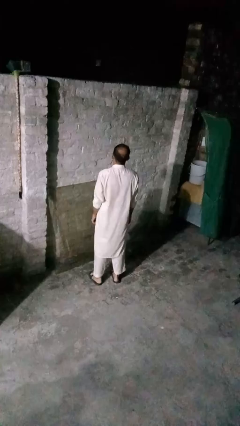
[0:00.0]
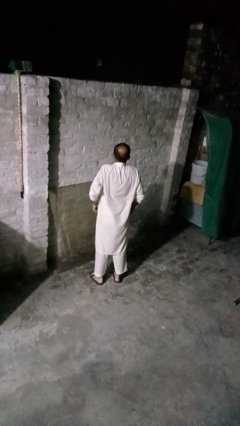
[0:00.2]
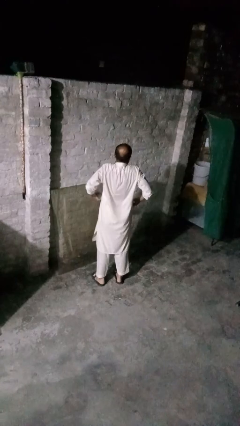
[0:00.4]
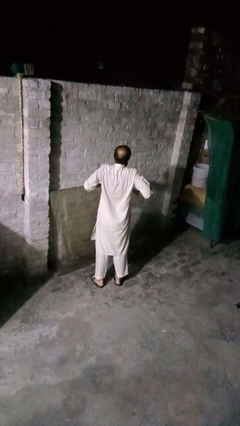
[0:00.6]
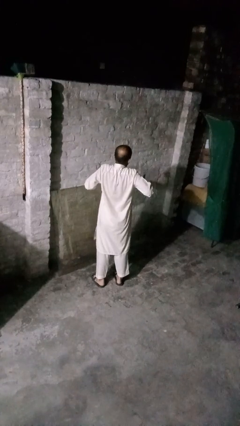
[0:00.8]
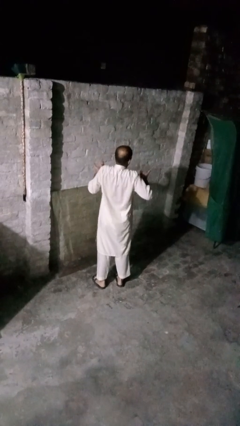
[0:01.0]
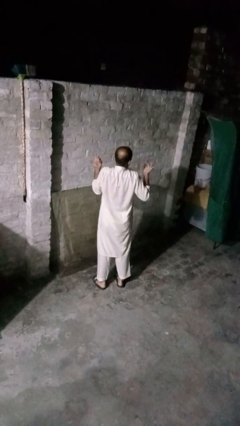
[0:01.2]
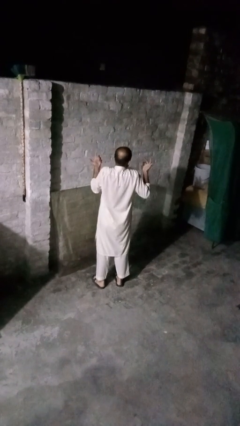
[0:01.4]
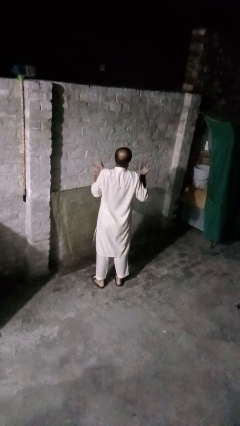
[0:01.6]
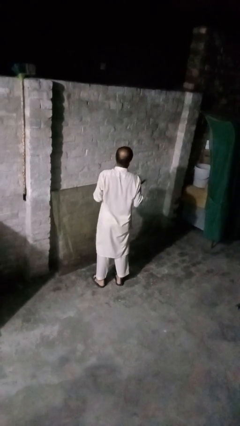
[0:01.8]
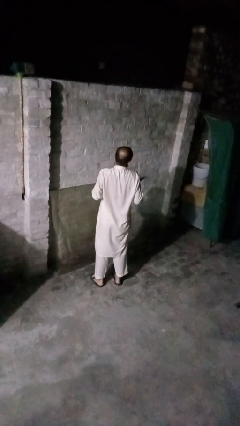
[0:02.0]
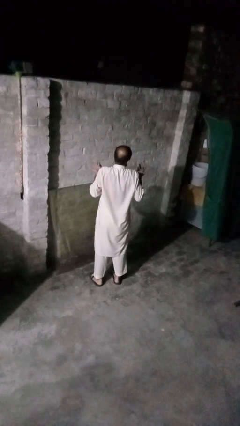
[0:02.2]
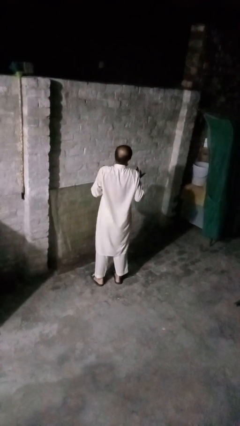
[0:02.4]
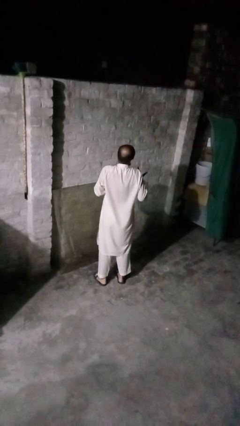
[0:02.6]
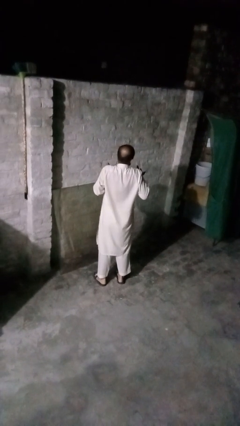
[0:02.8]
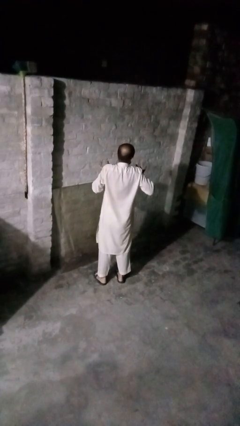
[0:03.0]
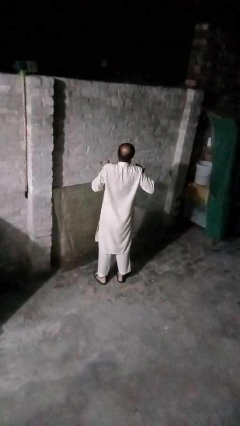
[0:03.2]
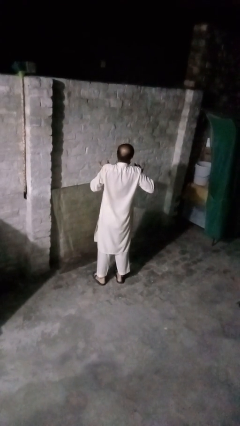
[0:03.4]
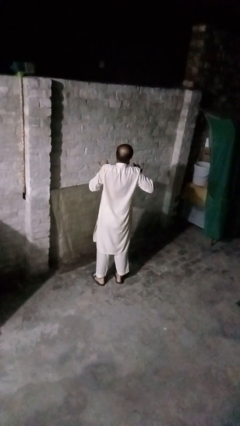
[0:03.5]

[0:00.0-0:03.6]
person shrugs

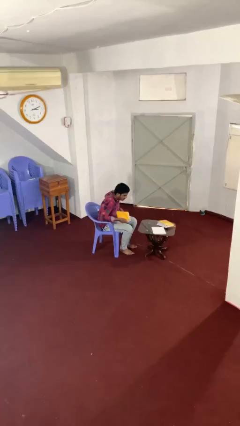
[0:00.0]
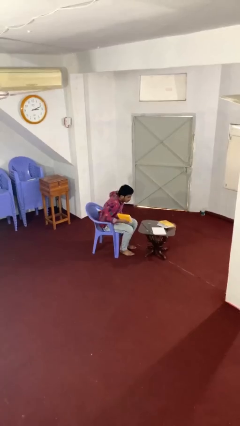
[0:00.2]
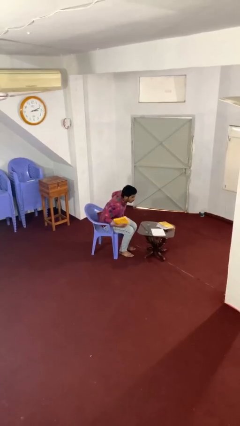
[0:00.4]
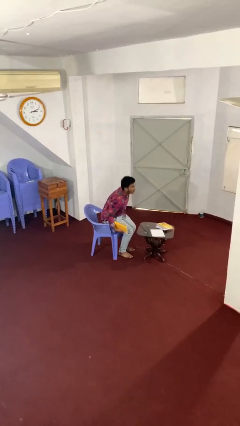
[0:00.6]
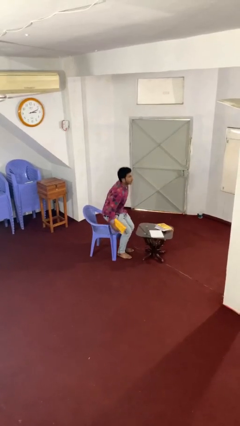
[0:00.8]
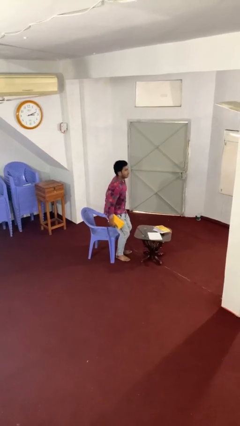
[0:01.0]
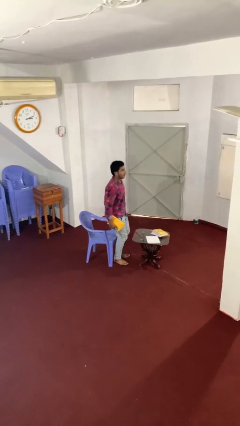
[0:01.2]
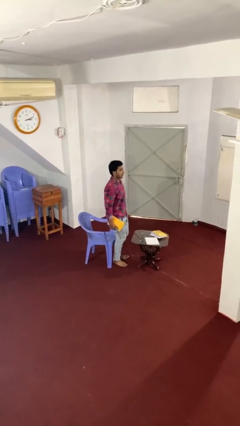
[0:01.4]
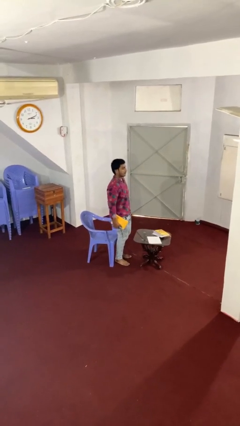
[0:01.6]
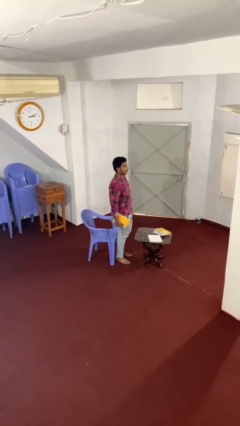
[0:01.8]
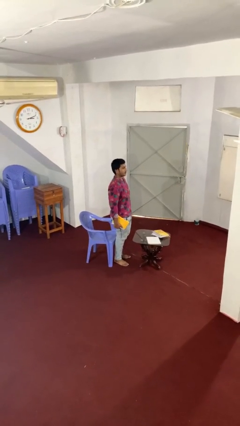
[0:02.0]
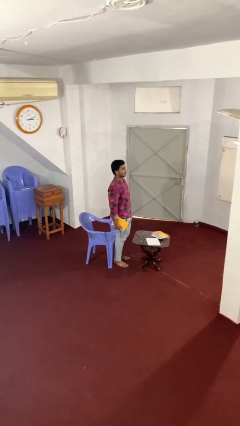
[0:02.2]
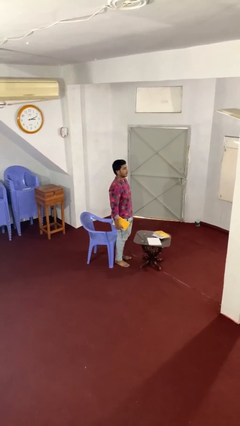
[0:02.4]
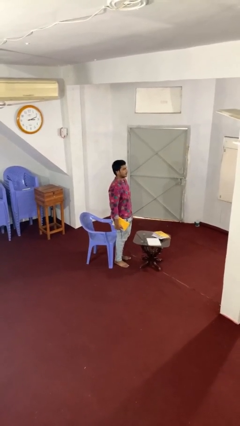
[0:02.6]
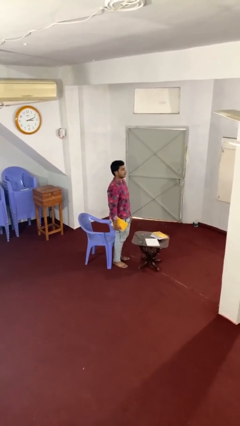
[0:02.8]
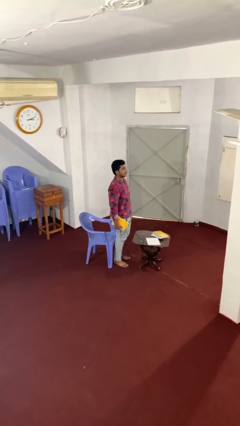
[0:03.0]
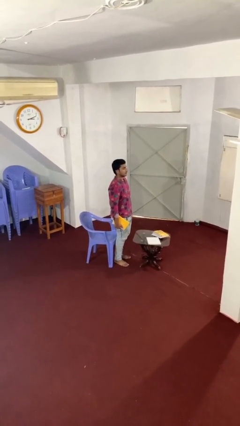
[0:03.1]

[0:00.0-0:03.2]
person stands up

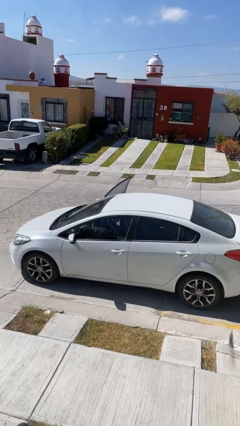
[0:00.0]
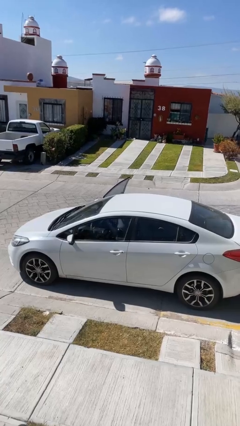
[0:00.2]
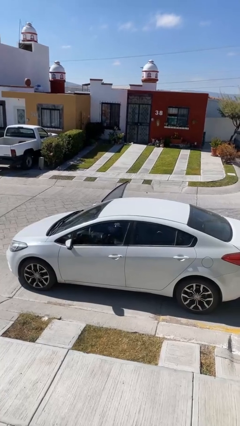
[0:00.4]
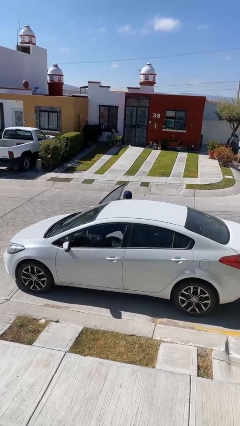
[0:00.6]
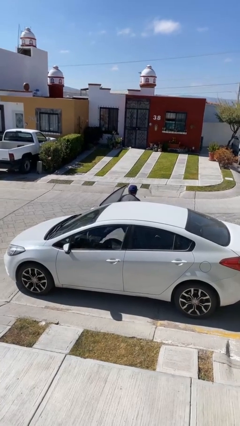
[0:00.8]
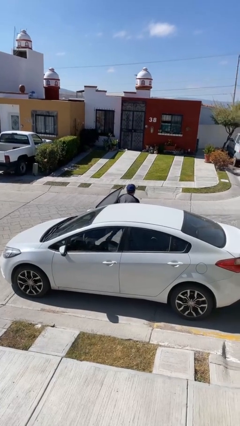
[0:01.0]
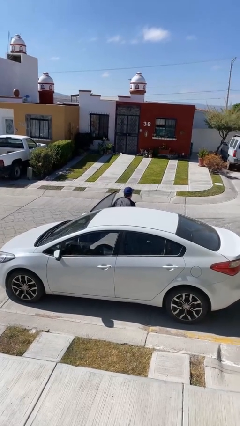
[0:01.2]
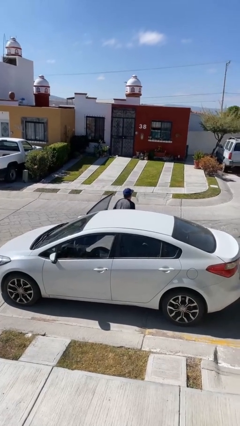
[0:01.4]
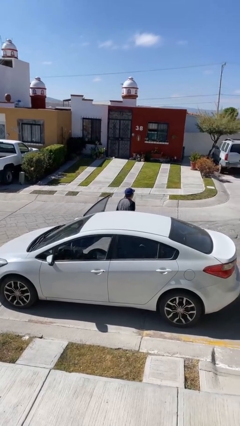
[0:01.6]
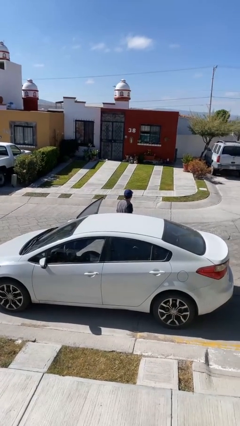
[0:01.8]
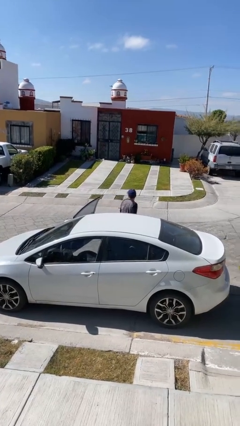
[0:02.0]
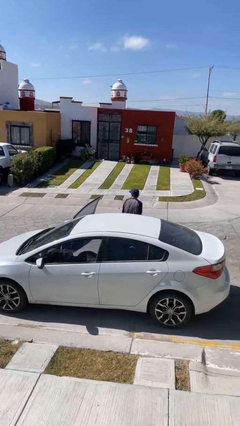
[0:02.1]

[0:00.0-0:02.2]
person exits car

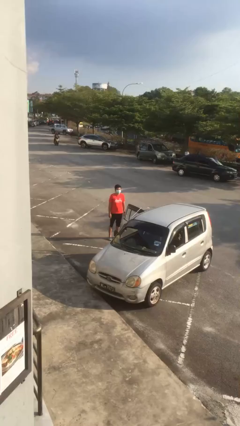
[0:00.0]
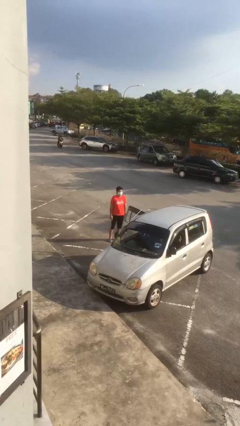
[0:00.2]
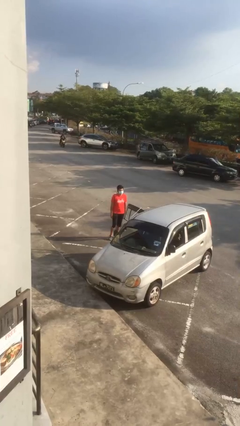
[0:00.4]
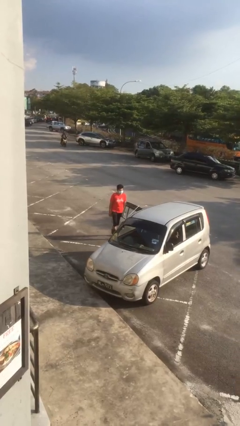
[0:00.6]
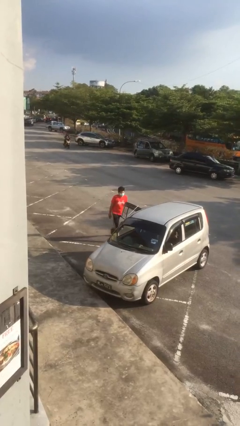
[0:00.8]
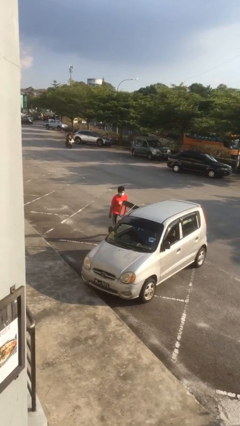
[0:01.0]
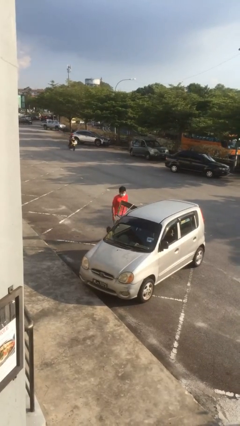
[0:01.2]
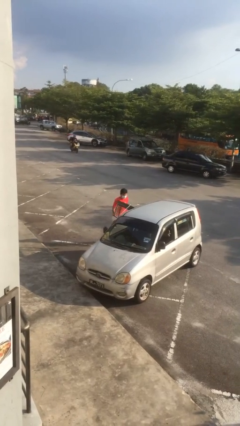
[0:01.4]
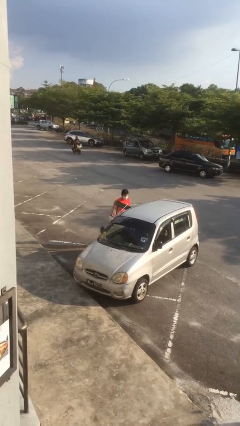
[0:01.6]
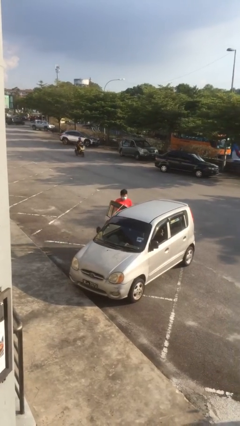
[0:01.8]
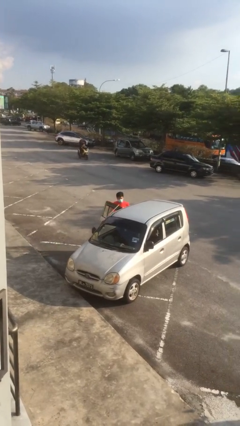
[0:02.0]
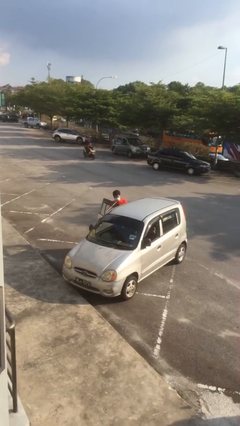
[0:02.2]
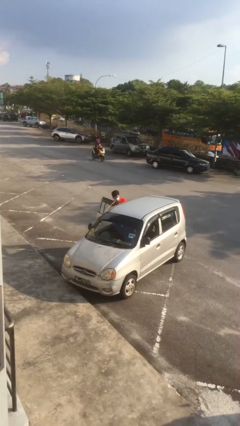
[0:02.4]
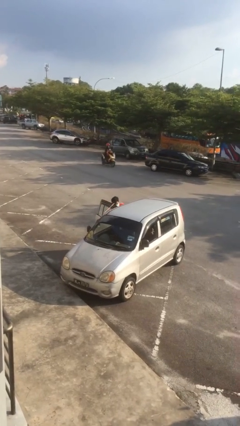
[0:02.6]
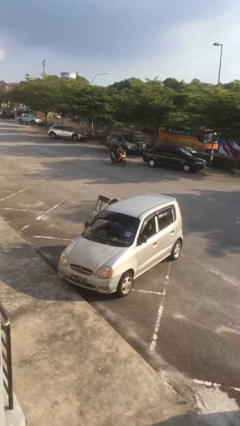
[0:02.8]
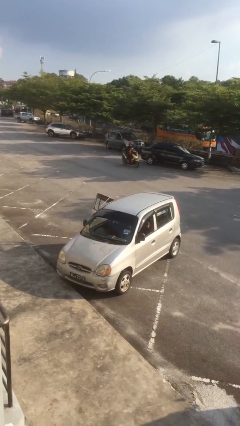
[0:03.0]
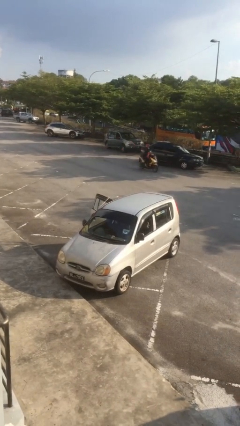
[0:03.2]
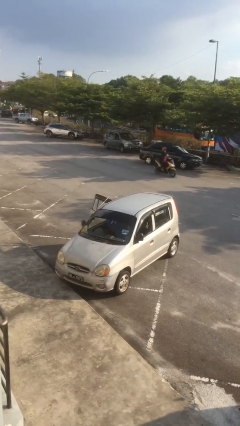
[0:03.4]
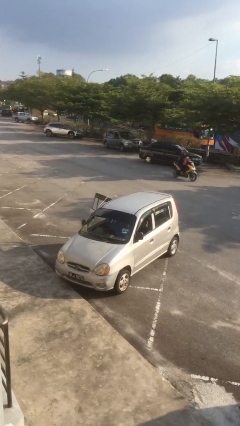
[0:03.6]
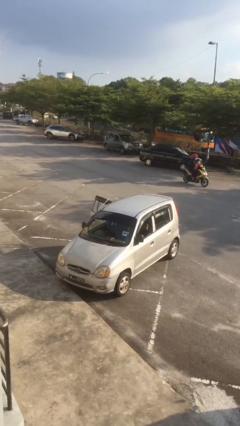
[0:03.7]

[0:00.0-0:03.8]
person enters car

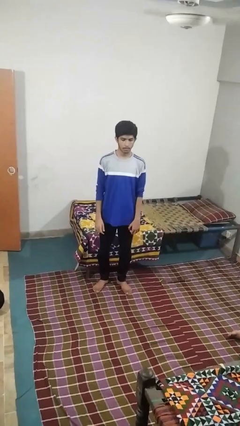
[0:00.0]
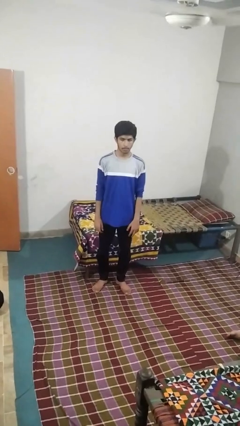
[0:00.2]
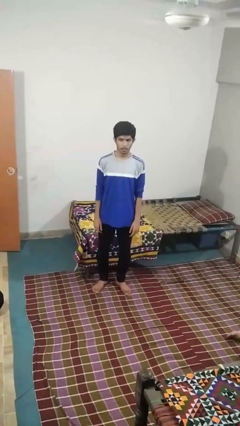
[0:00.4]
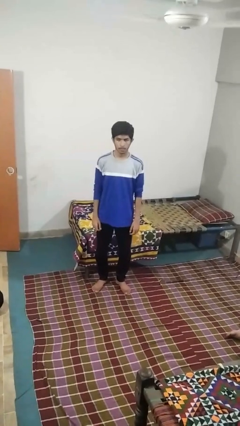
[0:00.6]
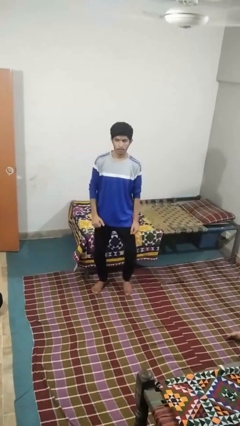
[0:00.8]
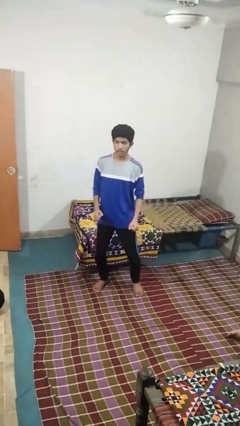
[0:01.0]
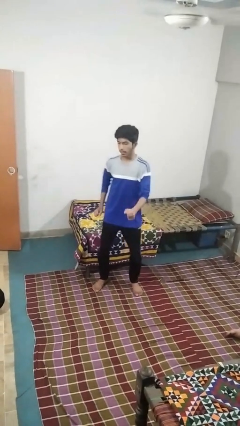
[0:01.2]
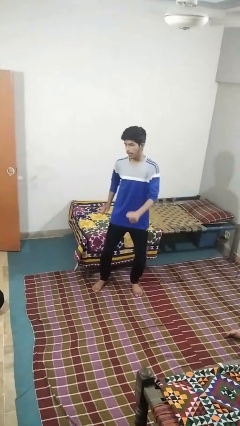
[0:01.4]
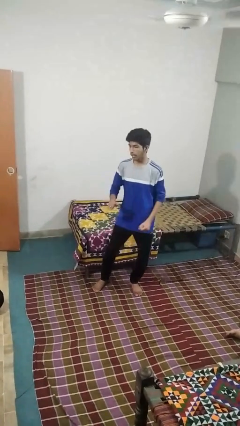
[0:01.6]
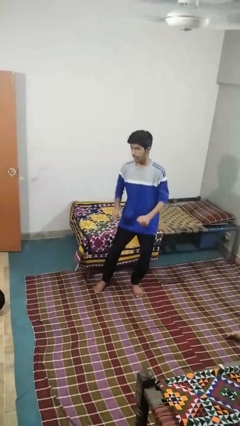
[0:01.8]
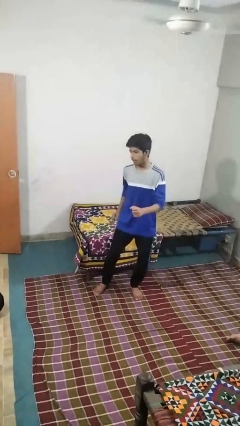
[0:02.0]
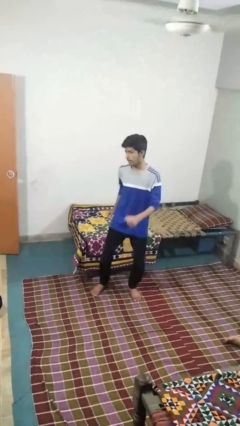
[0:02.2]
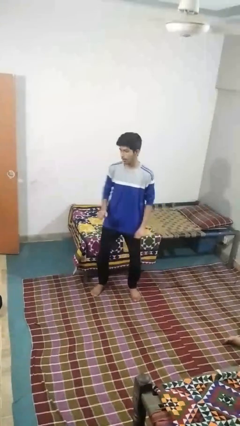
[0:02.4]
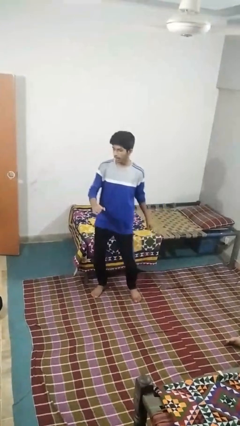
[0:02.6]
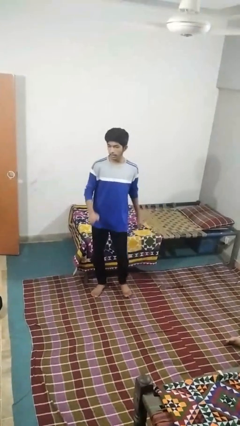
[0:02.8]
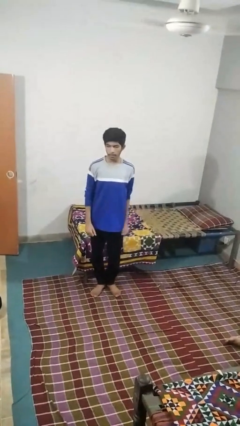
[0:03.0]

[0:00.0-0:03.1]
person dances in place

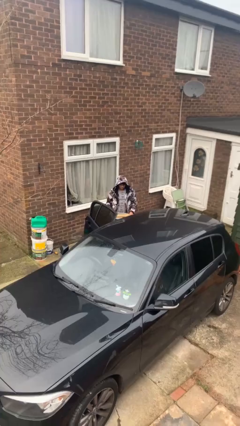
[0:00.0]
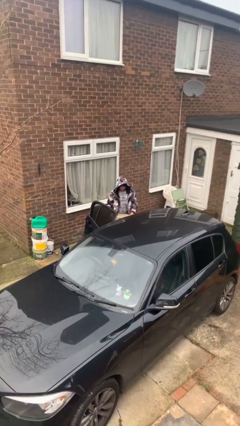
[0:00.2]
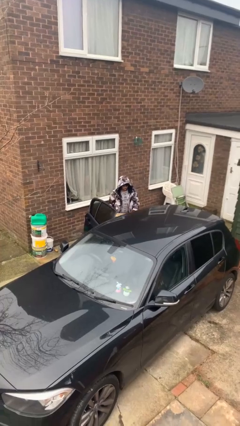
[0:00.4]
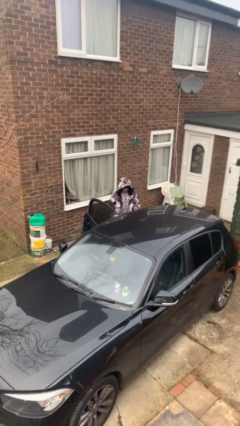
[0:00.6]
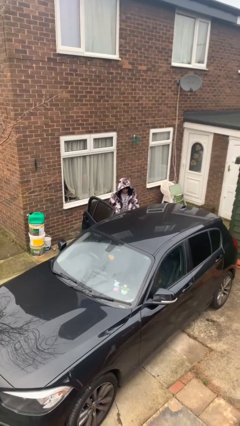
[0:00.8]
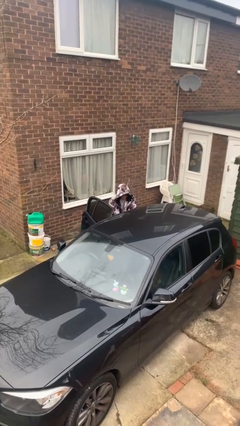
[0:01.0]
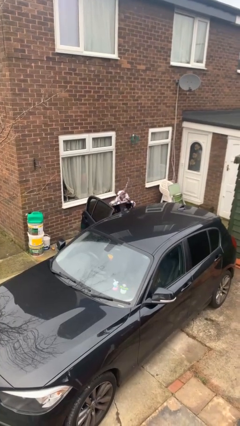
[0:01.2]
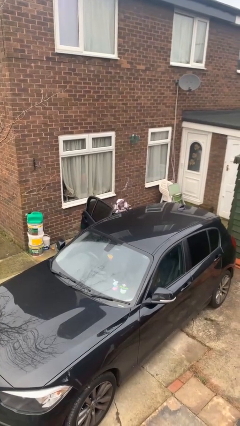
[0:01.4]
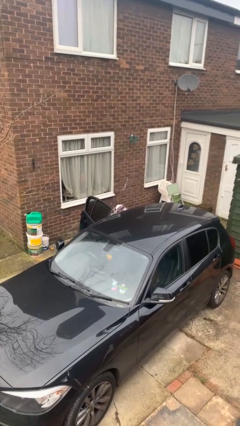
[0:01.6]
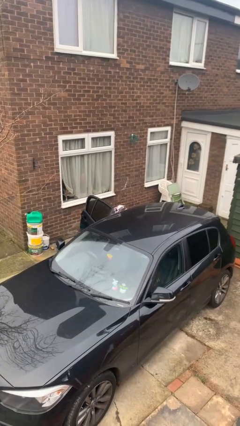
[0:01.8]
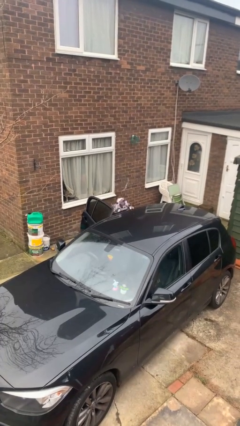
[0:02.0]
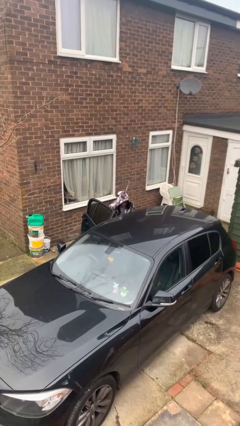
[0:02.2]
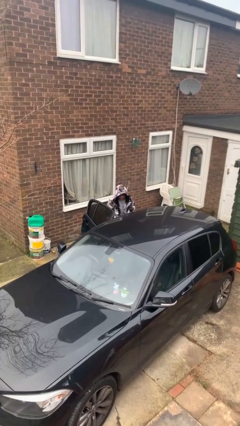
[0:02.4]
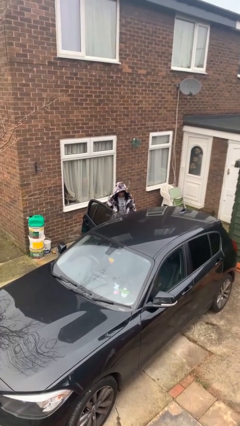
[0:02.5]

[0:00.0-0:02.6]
person loads car
